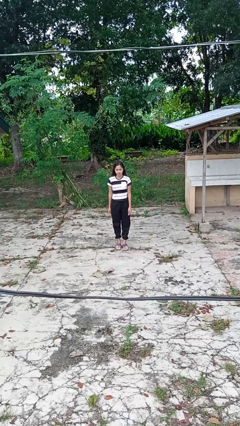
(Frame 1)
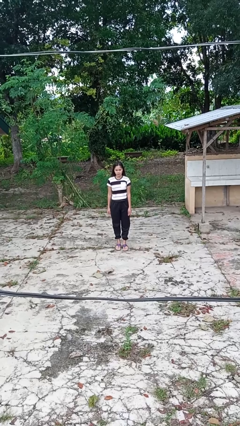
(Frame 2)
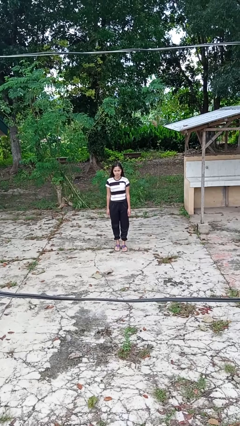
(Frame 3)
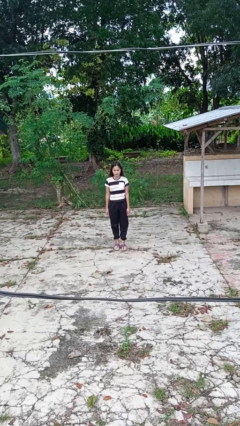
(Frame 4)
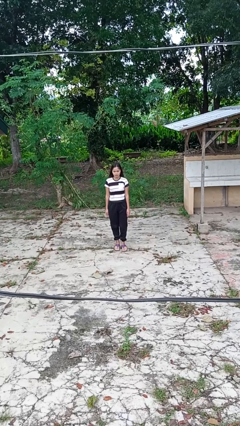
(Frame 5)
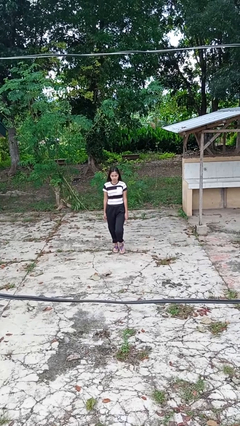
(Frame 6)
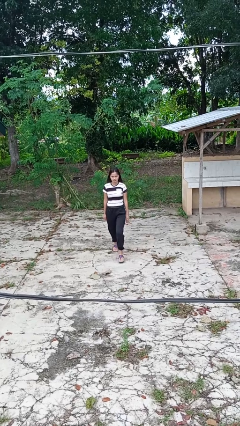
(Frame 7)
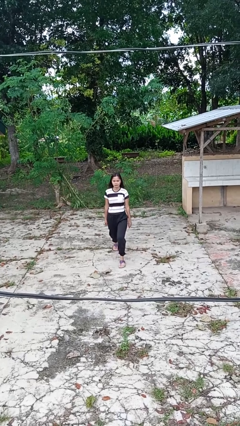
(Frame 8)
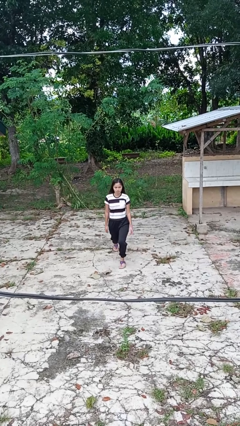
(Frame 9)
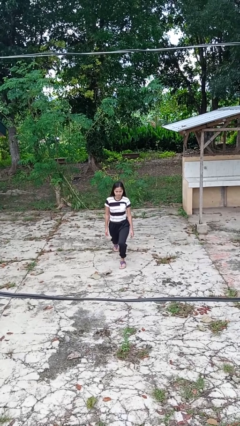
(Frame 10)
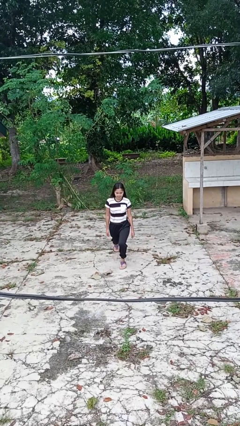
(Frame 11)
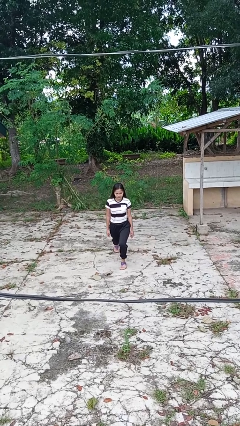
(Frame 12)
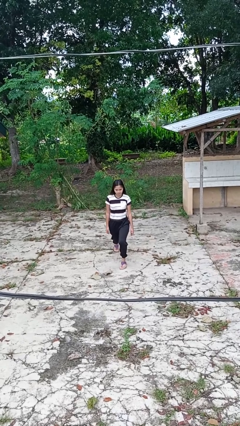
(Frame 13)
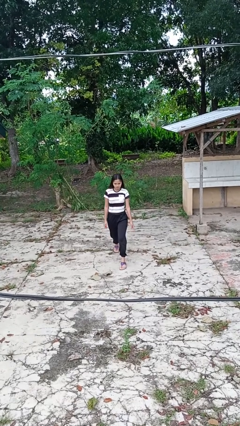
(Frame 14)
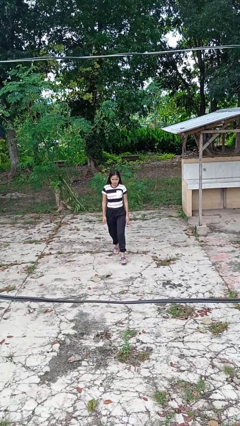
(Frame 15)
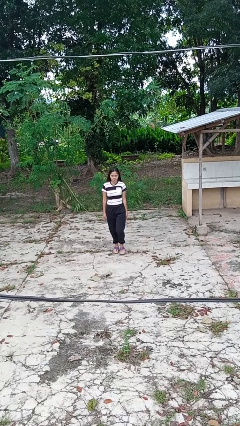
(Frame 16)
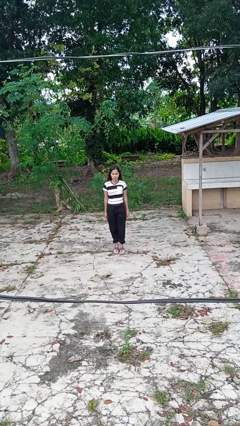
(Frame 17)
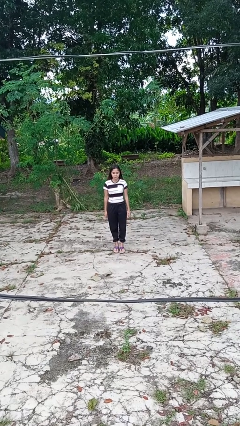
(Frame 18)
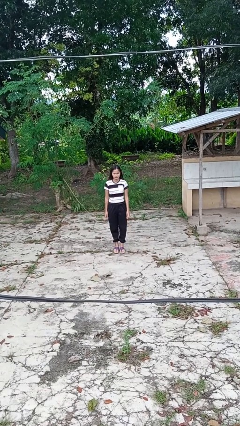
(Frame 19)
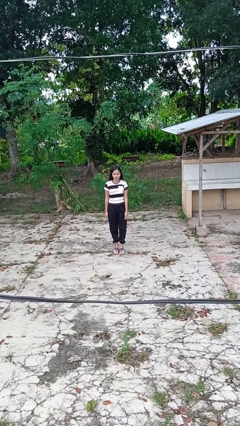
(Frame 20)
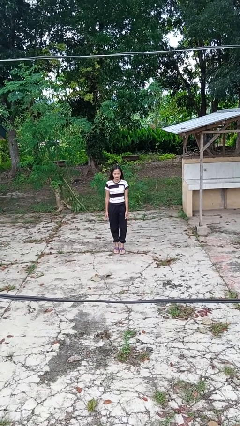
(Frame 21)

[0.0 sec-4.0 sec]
person exercises with lunges

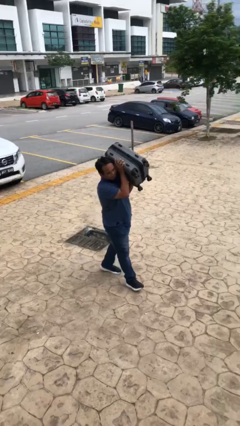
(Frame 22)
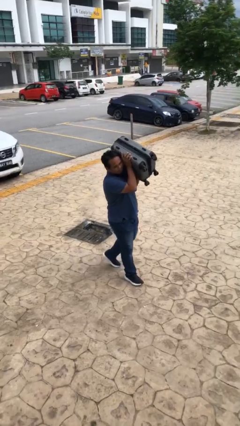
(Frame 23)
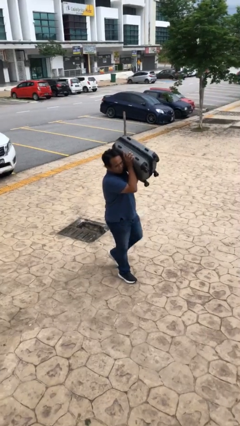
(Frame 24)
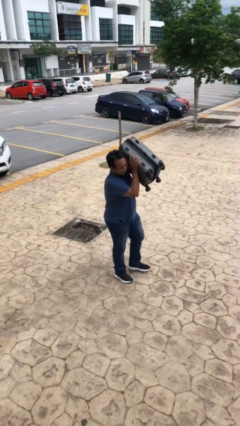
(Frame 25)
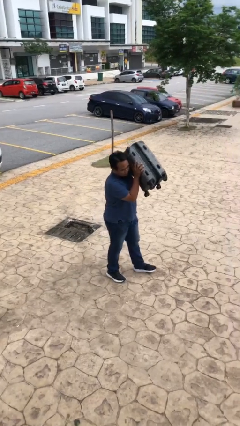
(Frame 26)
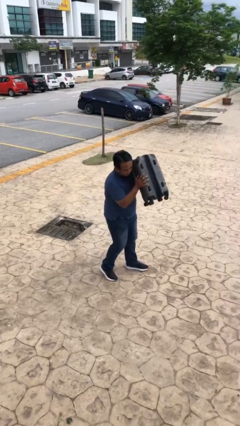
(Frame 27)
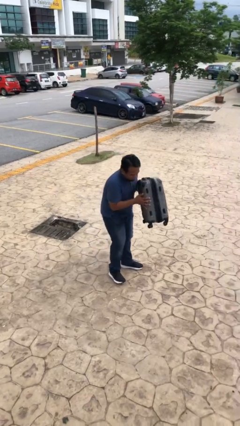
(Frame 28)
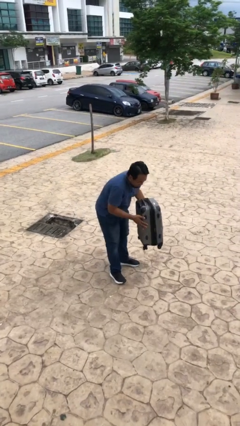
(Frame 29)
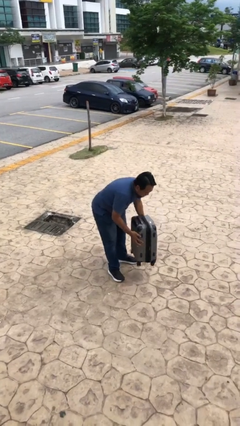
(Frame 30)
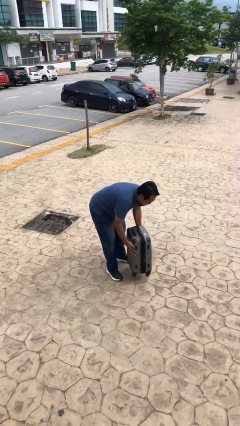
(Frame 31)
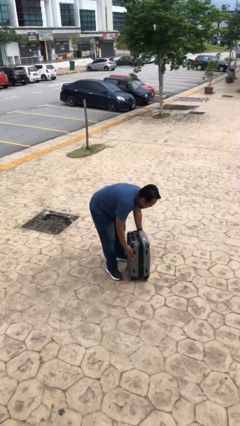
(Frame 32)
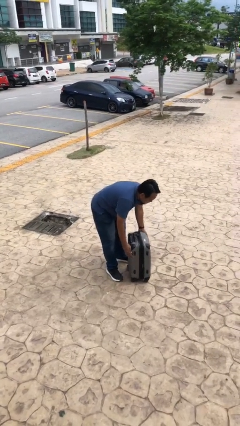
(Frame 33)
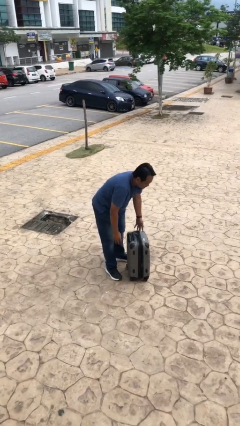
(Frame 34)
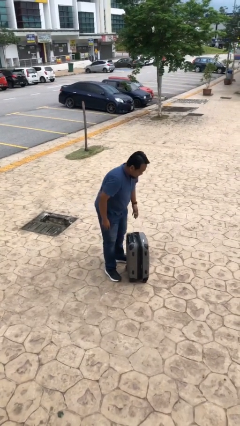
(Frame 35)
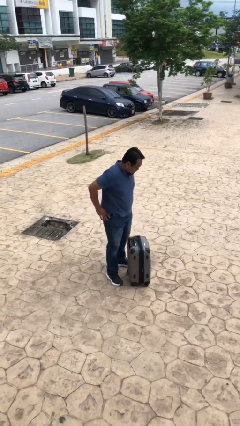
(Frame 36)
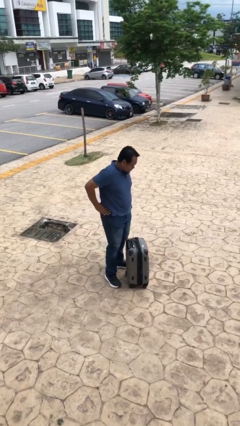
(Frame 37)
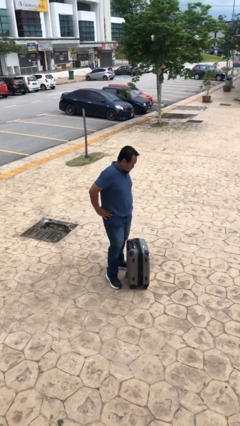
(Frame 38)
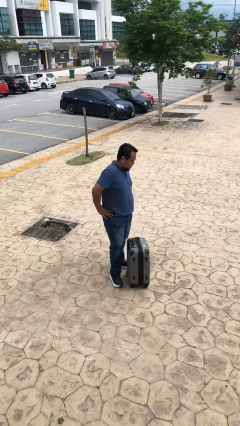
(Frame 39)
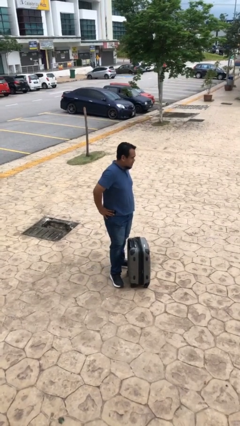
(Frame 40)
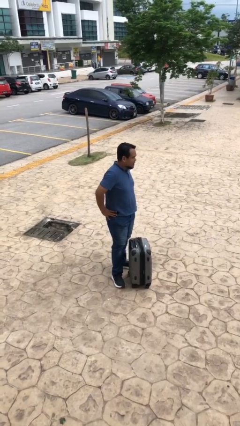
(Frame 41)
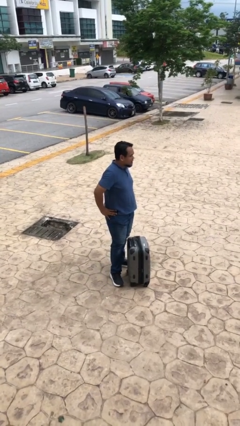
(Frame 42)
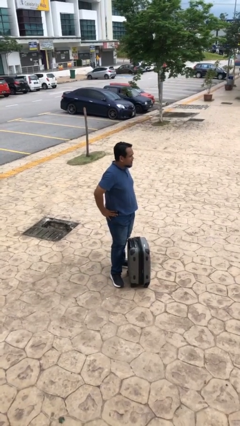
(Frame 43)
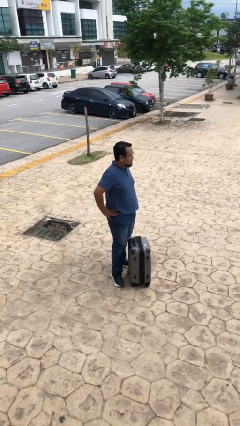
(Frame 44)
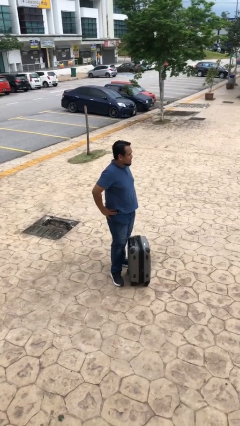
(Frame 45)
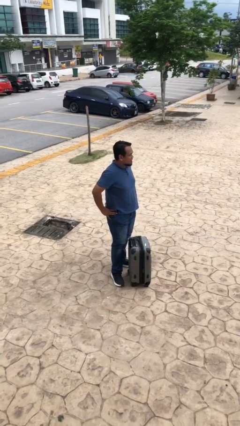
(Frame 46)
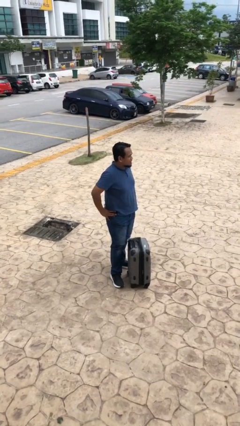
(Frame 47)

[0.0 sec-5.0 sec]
person puts down object on floor

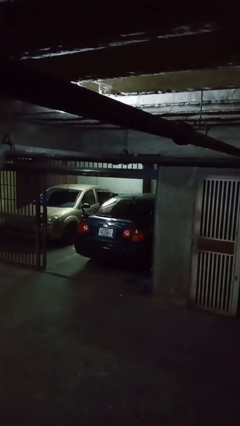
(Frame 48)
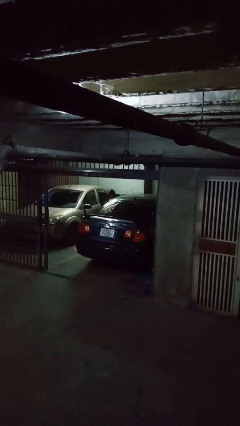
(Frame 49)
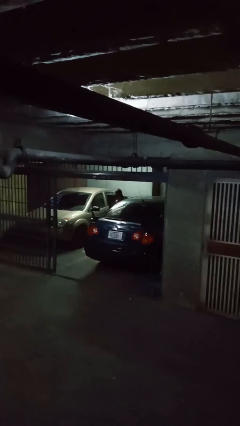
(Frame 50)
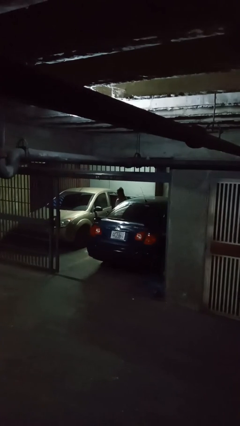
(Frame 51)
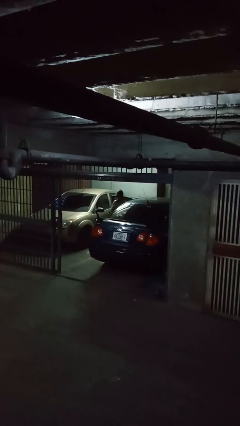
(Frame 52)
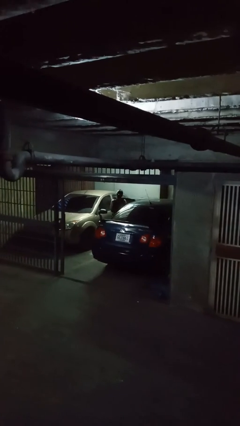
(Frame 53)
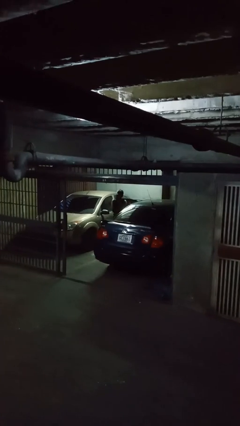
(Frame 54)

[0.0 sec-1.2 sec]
person exits car

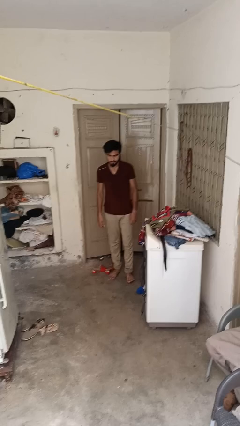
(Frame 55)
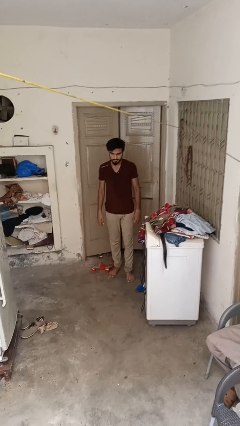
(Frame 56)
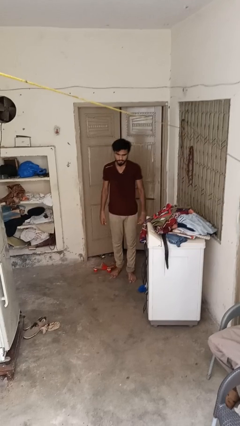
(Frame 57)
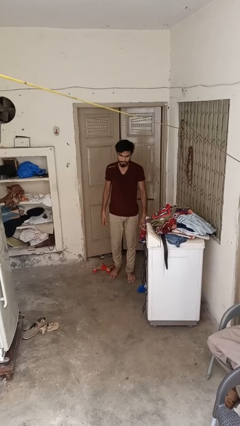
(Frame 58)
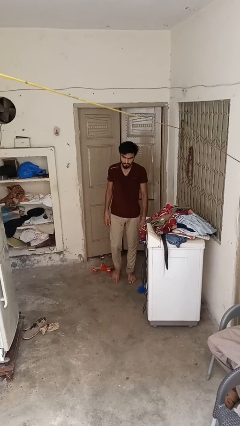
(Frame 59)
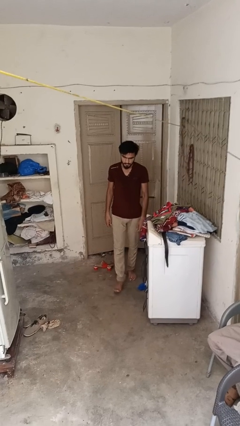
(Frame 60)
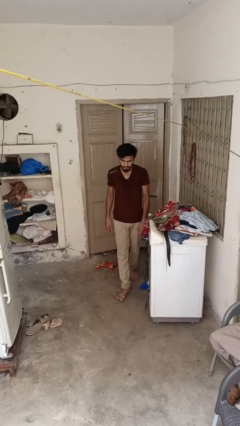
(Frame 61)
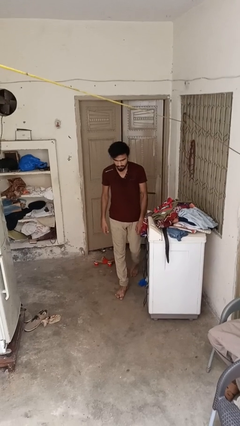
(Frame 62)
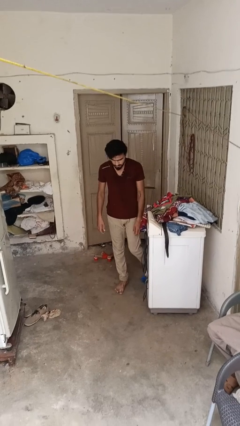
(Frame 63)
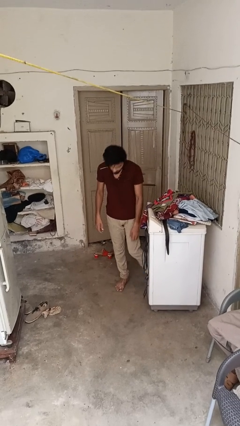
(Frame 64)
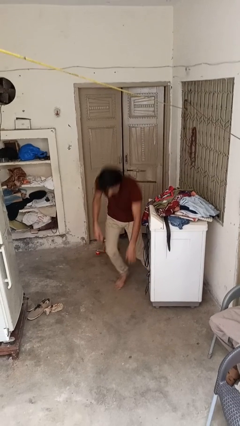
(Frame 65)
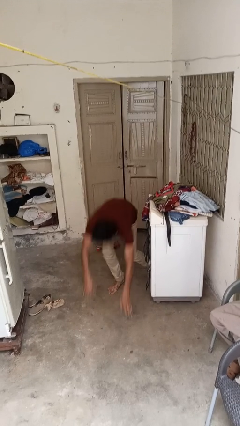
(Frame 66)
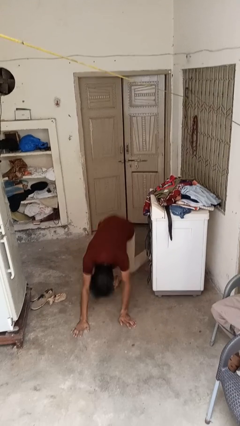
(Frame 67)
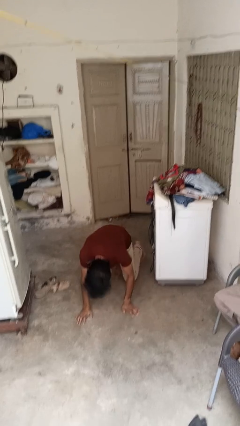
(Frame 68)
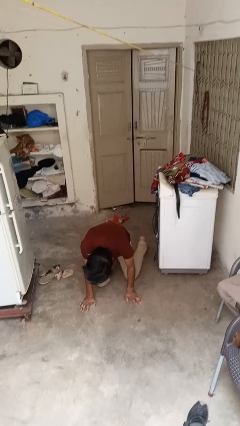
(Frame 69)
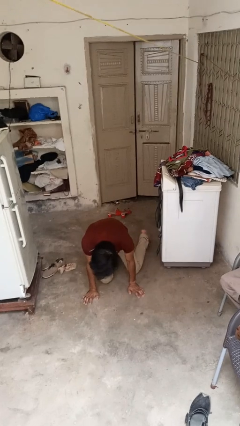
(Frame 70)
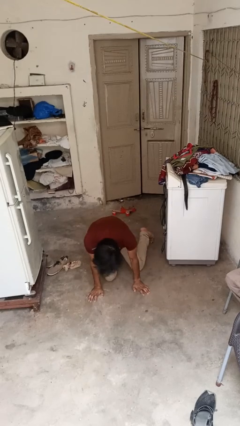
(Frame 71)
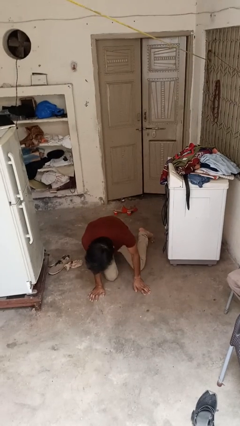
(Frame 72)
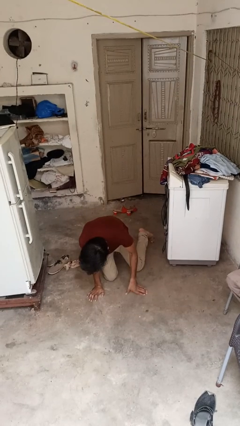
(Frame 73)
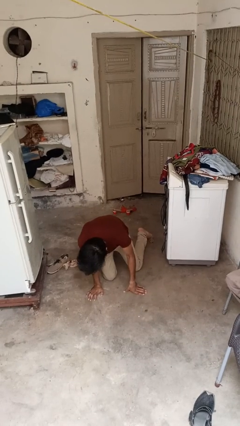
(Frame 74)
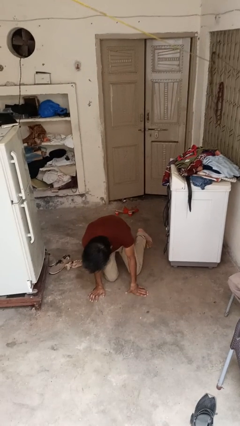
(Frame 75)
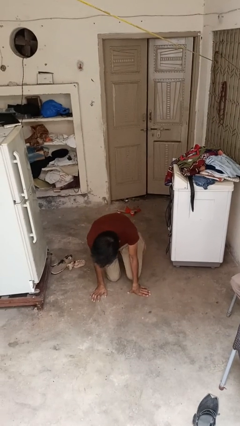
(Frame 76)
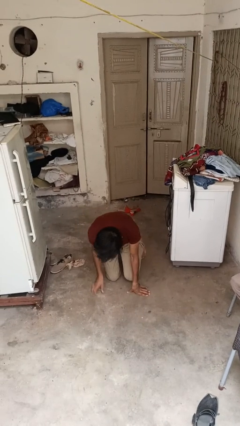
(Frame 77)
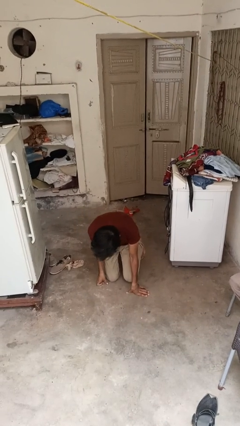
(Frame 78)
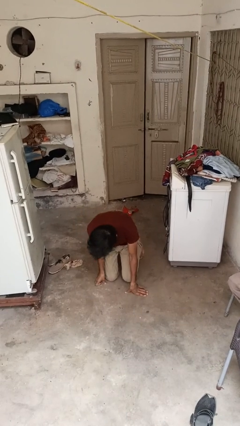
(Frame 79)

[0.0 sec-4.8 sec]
person trips on object on floor

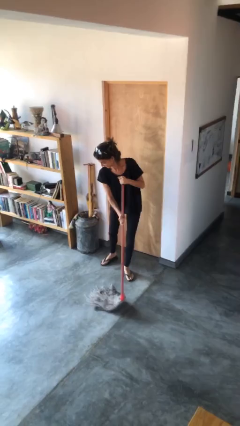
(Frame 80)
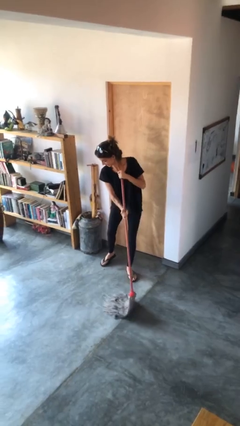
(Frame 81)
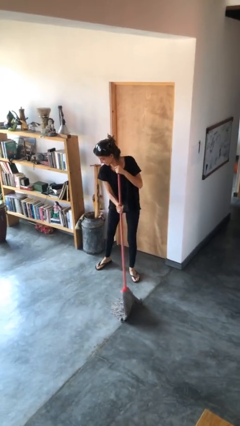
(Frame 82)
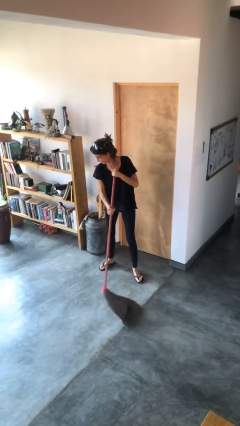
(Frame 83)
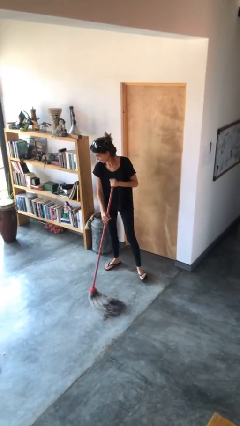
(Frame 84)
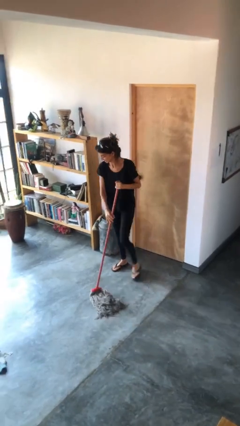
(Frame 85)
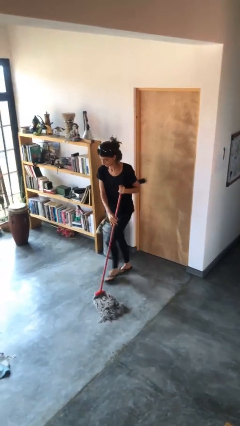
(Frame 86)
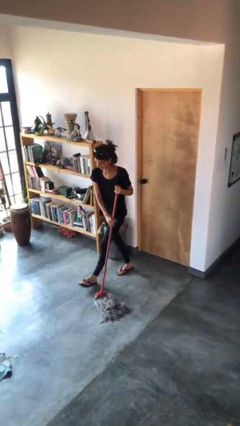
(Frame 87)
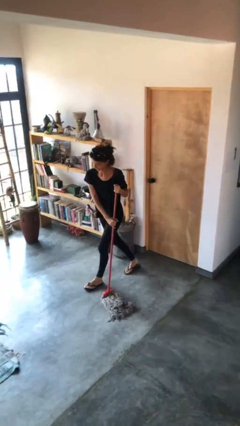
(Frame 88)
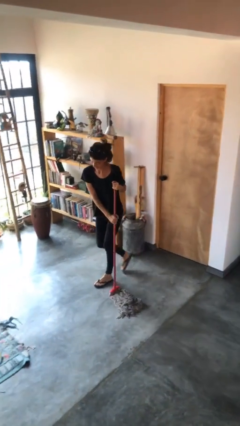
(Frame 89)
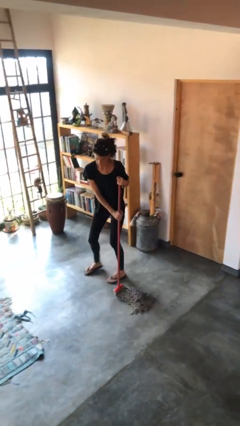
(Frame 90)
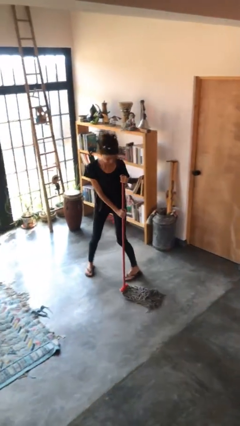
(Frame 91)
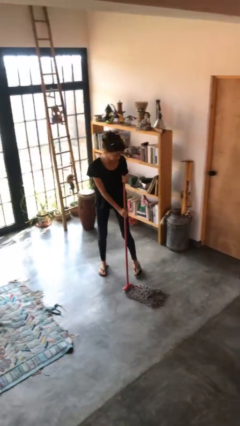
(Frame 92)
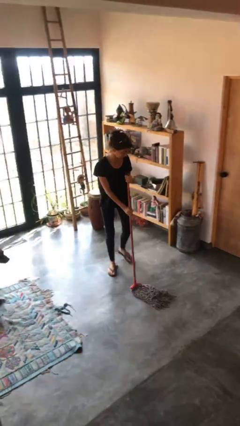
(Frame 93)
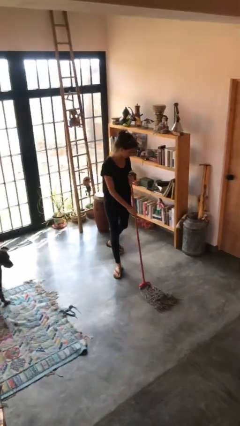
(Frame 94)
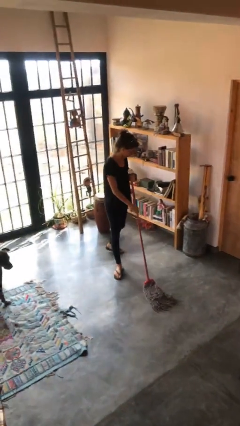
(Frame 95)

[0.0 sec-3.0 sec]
person mops
